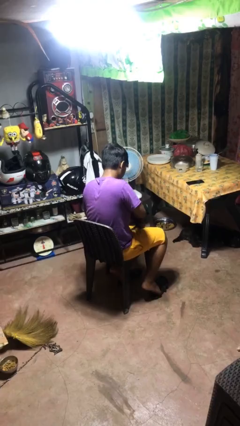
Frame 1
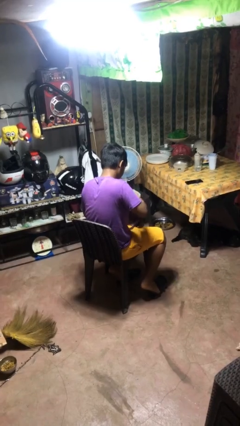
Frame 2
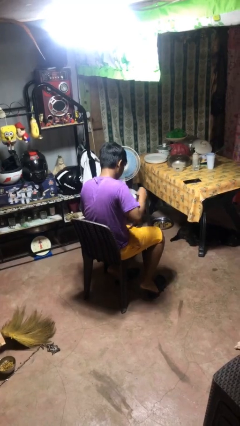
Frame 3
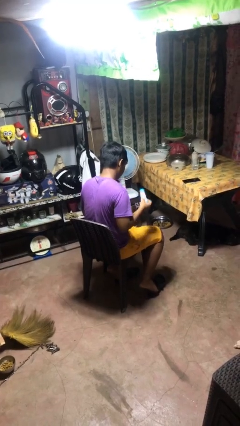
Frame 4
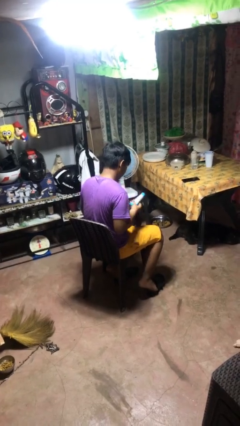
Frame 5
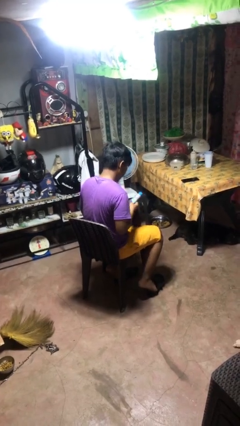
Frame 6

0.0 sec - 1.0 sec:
person takes object from purse

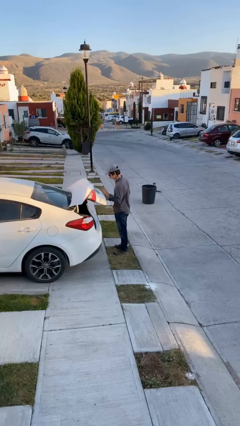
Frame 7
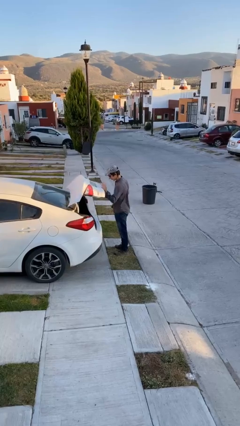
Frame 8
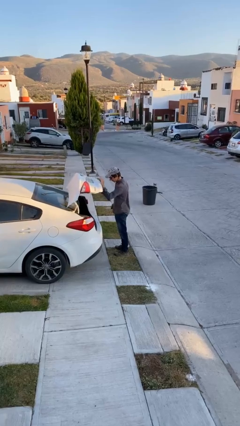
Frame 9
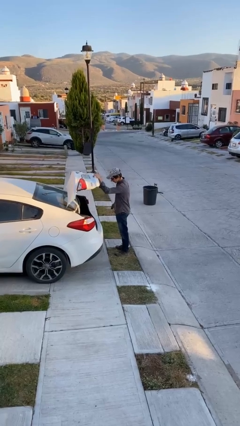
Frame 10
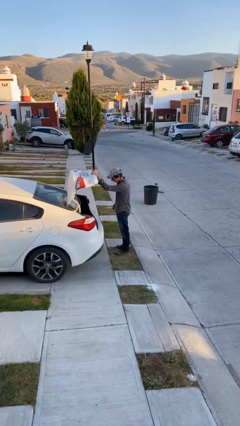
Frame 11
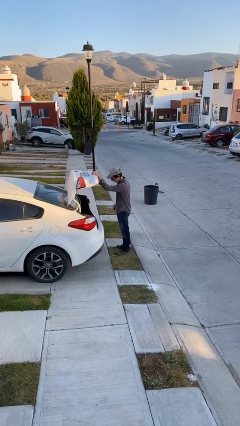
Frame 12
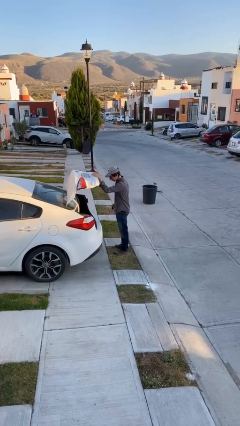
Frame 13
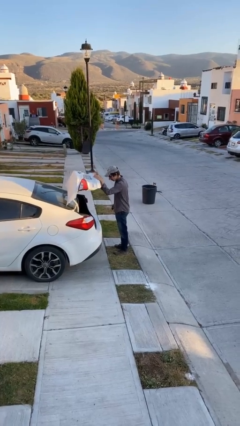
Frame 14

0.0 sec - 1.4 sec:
person opens car trunk

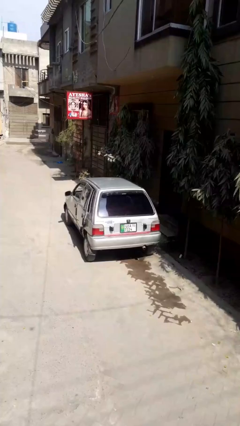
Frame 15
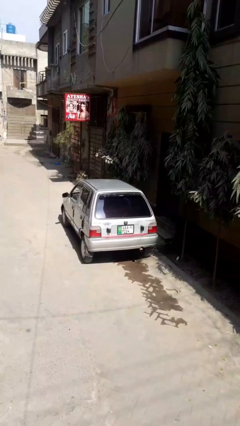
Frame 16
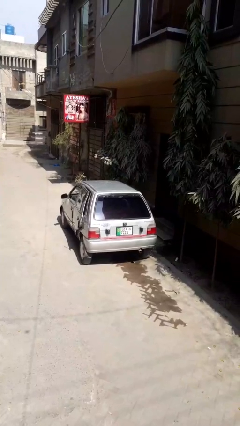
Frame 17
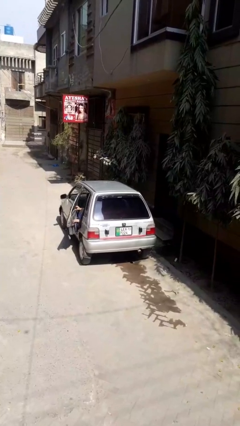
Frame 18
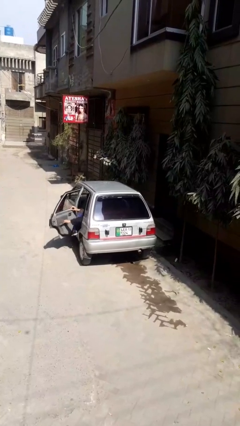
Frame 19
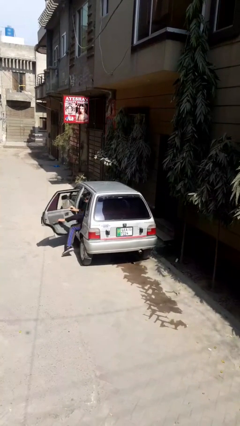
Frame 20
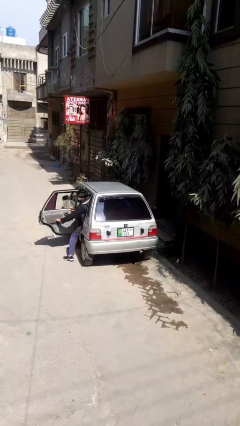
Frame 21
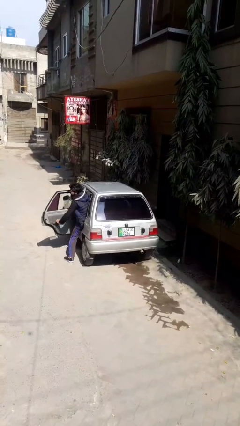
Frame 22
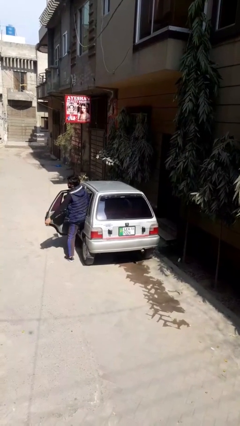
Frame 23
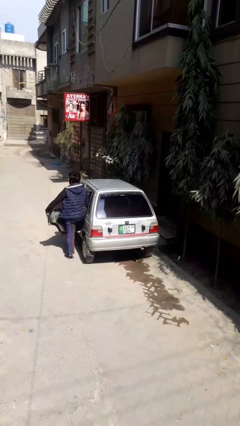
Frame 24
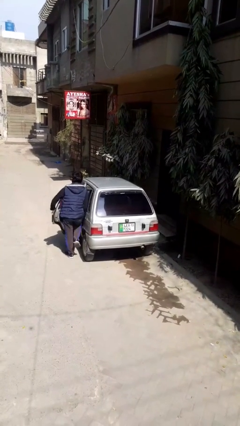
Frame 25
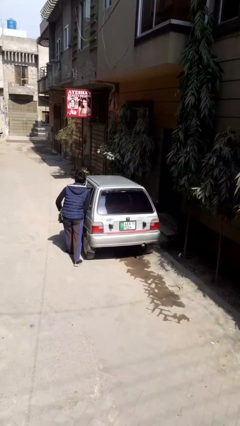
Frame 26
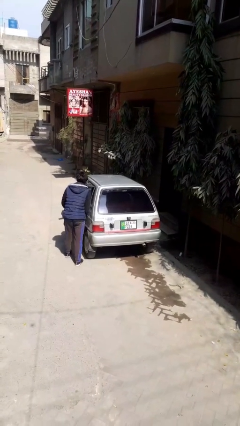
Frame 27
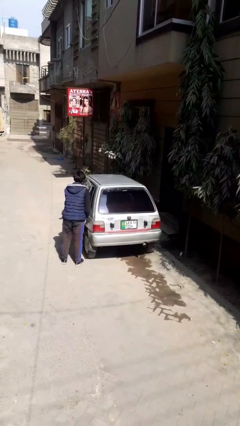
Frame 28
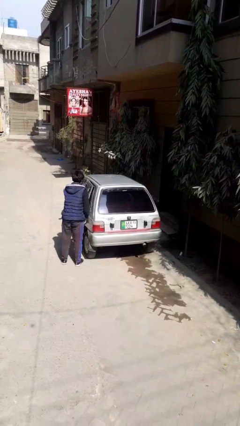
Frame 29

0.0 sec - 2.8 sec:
car drops off person

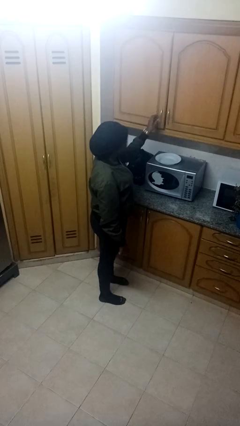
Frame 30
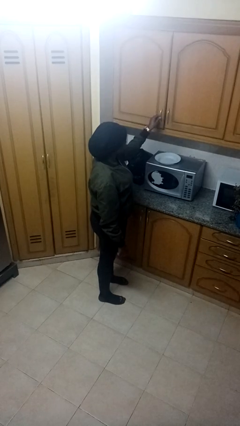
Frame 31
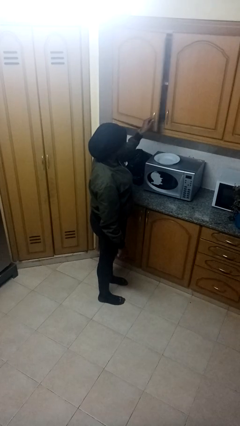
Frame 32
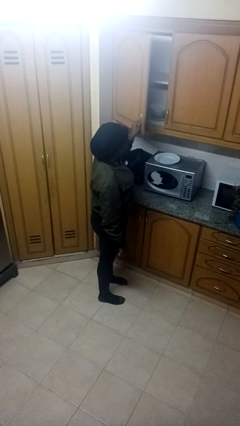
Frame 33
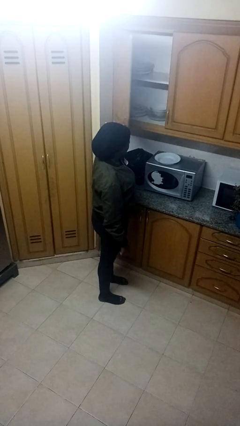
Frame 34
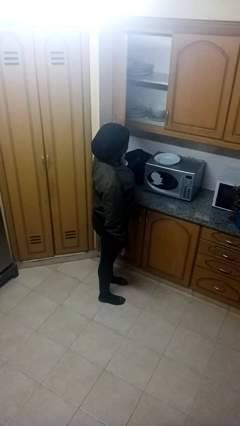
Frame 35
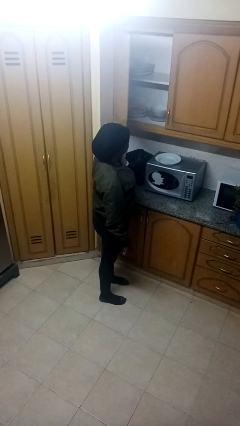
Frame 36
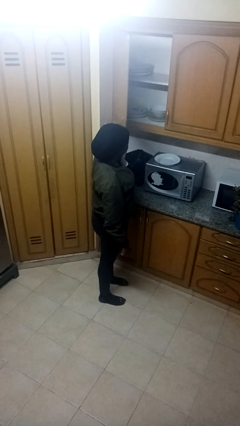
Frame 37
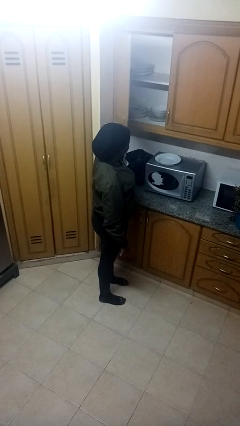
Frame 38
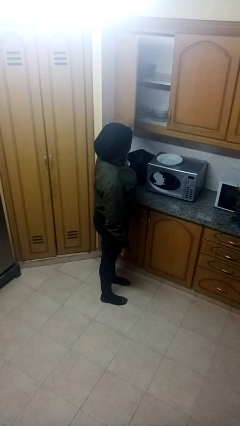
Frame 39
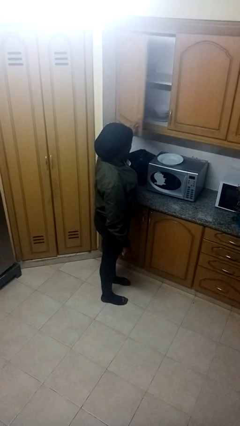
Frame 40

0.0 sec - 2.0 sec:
person opens cabinet

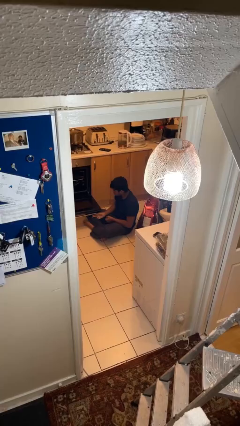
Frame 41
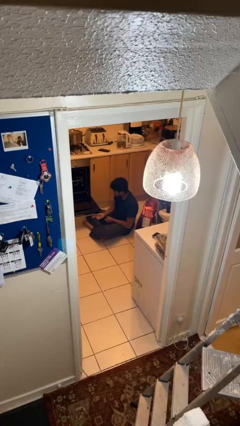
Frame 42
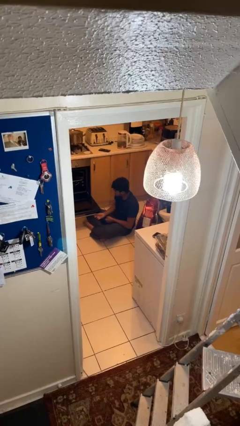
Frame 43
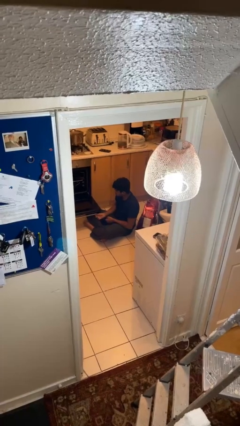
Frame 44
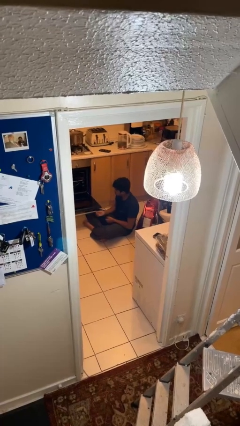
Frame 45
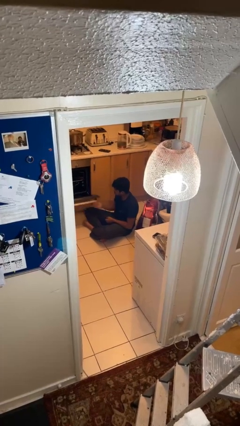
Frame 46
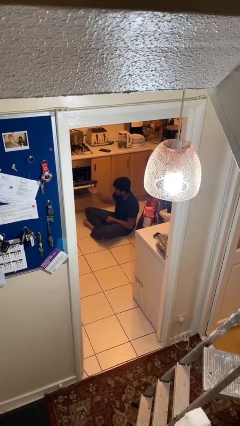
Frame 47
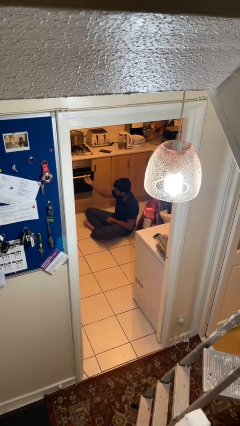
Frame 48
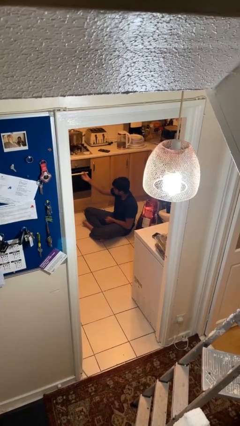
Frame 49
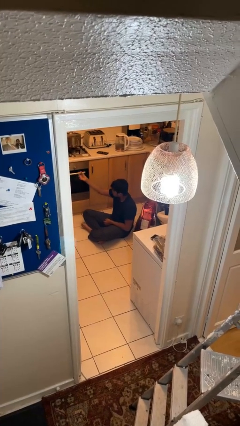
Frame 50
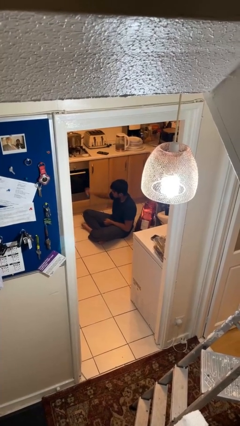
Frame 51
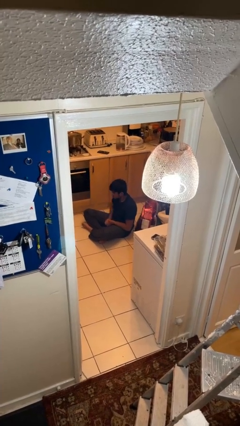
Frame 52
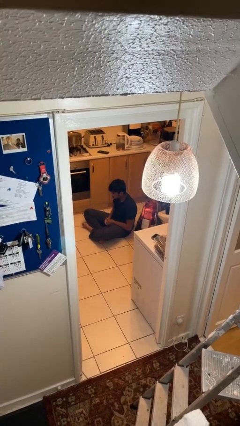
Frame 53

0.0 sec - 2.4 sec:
person closes oven door

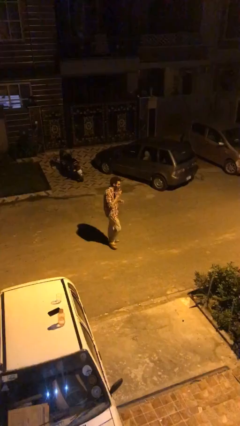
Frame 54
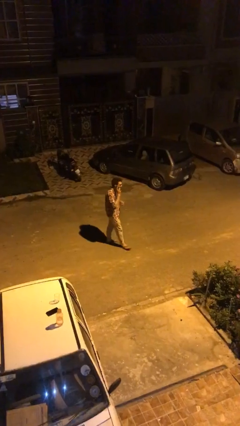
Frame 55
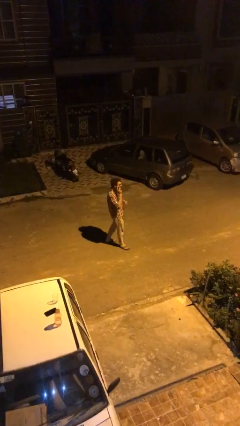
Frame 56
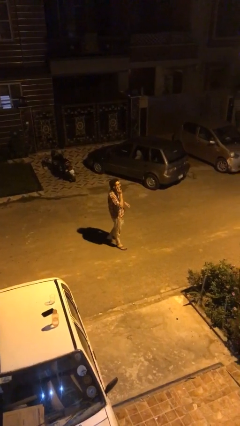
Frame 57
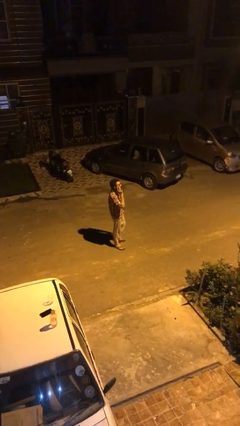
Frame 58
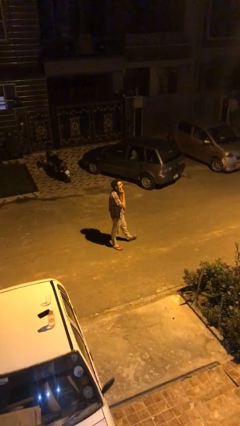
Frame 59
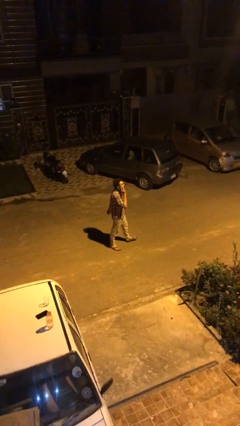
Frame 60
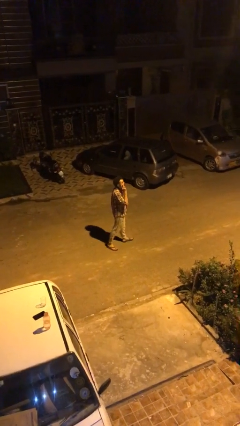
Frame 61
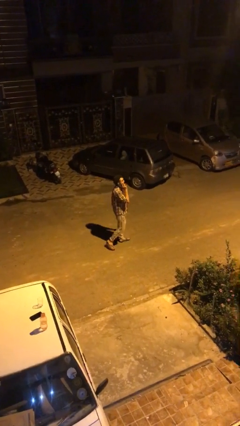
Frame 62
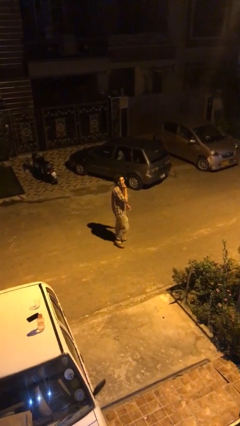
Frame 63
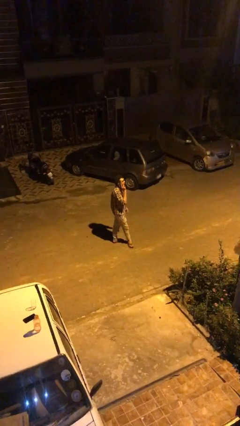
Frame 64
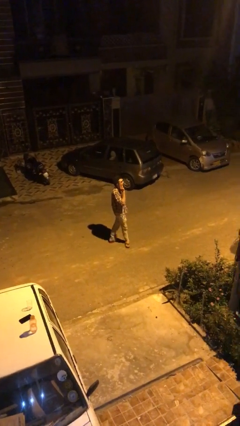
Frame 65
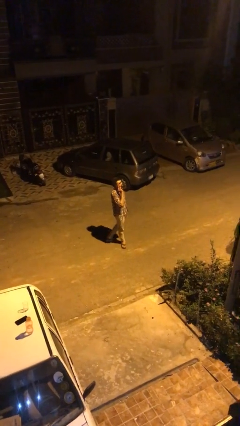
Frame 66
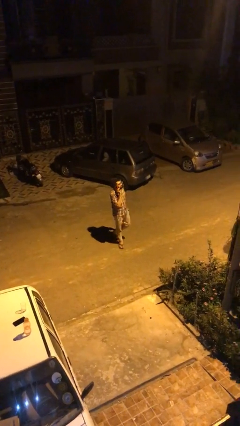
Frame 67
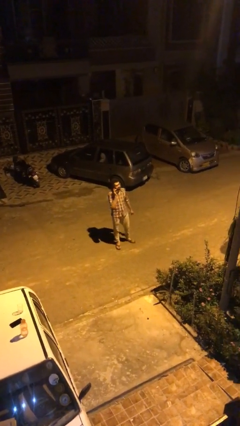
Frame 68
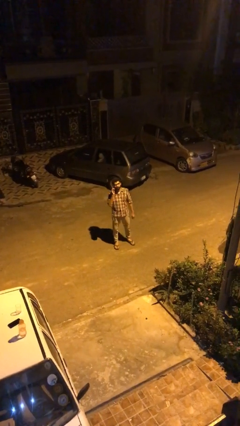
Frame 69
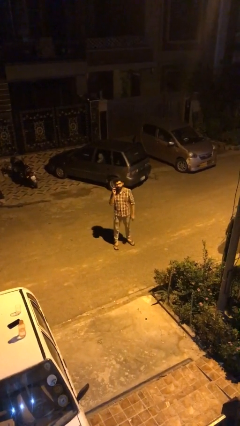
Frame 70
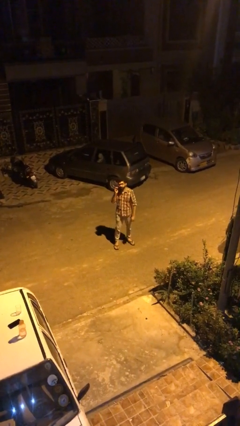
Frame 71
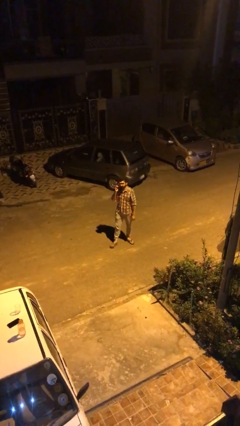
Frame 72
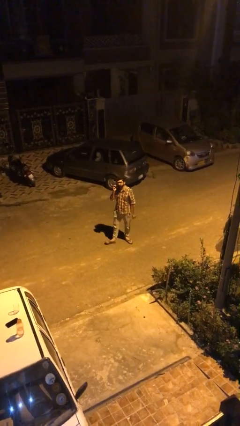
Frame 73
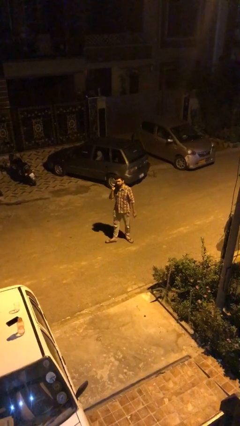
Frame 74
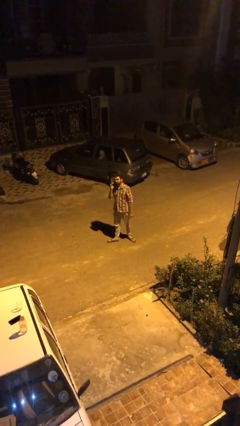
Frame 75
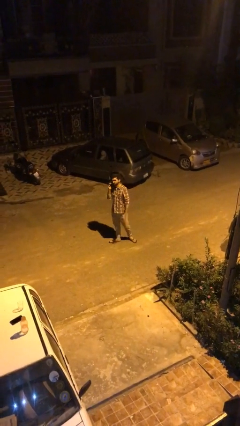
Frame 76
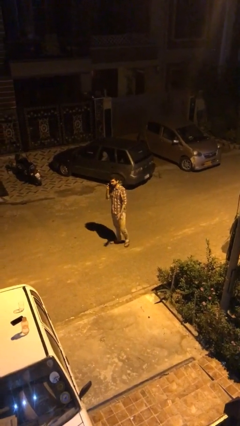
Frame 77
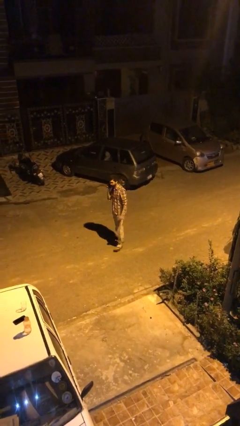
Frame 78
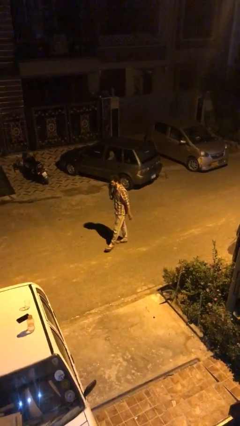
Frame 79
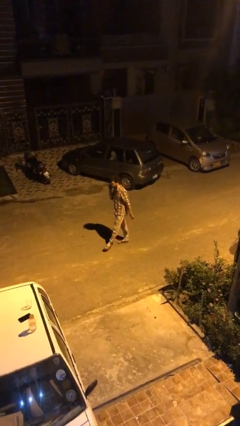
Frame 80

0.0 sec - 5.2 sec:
person talks on phone

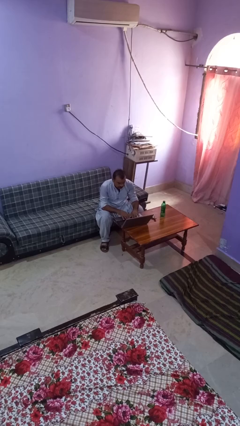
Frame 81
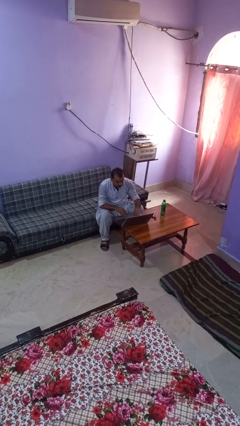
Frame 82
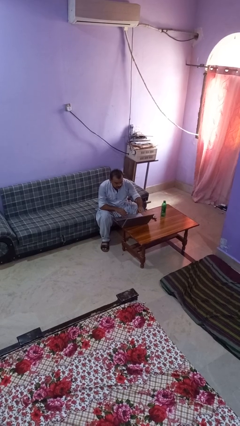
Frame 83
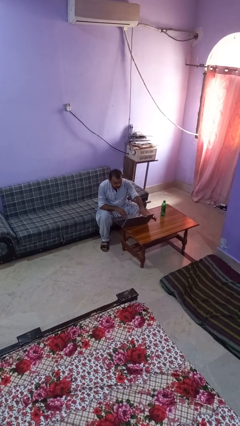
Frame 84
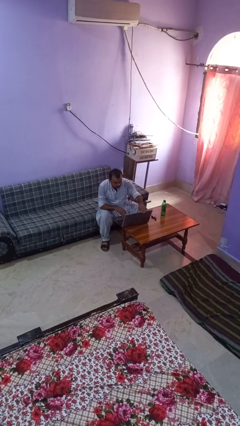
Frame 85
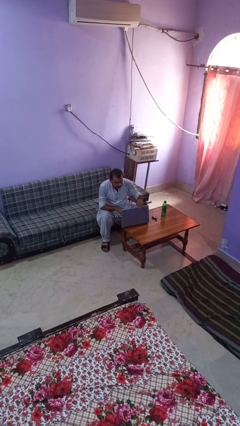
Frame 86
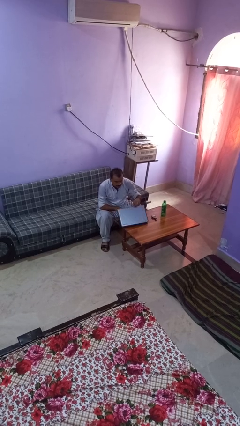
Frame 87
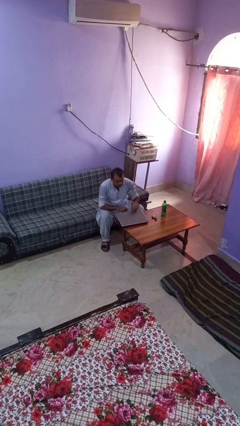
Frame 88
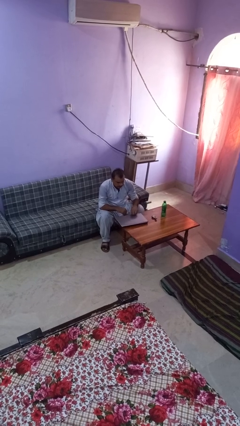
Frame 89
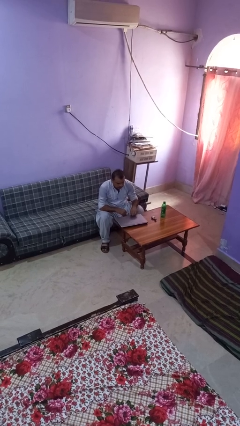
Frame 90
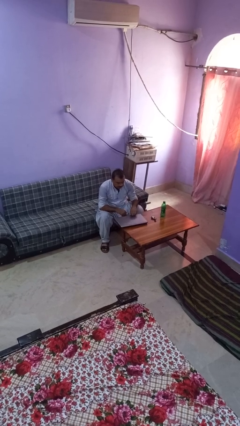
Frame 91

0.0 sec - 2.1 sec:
person closes laptop
